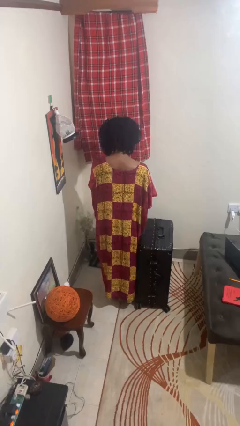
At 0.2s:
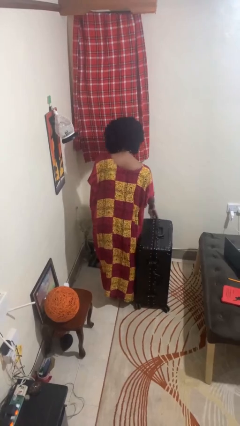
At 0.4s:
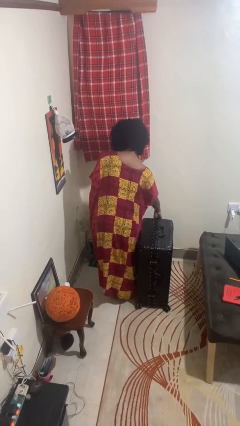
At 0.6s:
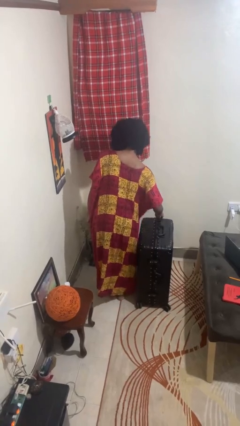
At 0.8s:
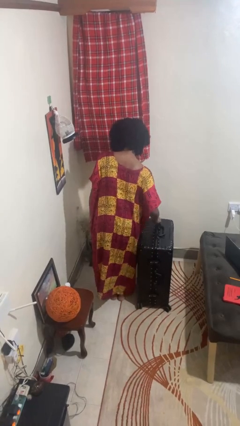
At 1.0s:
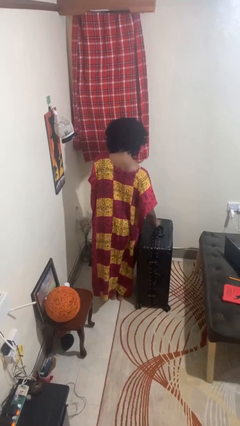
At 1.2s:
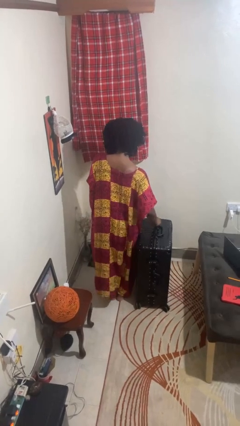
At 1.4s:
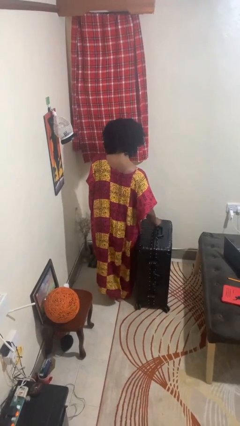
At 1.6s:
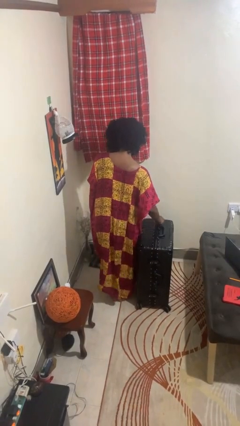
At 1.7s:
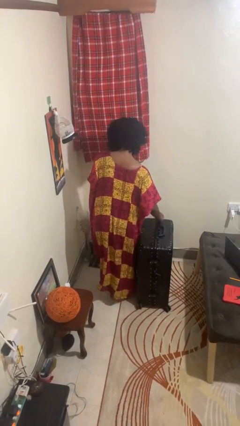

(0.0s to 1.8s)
person opens suitcase

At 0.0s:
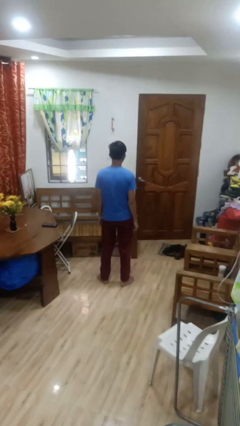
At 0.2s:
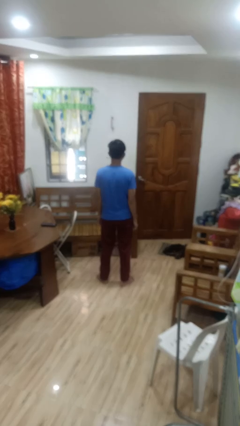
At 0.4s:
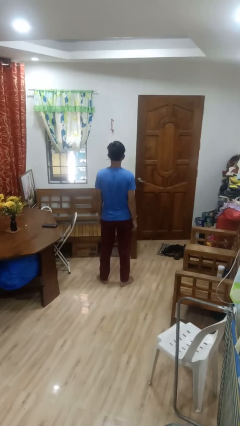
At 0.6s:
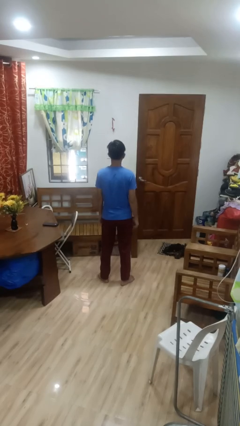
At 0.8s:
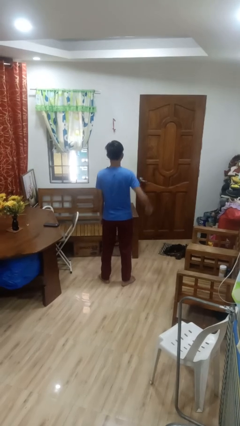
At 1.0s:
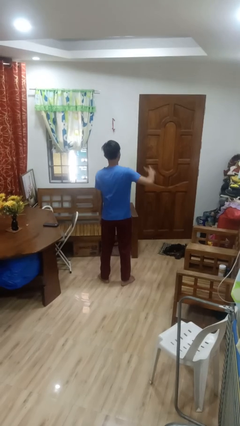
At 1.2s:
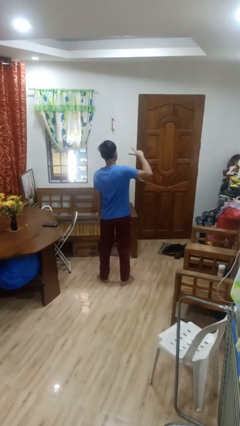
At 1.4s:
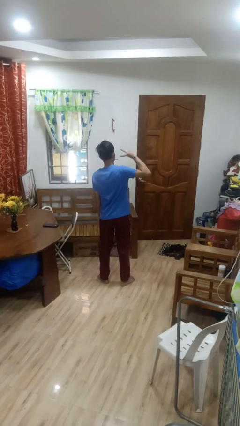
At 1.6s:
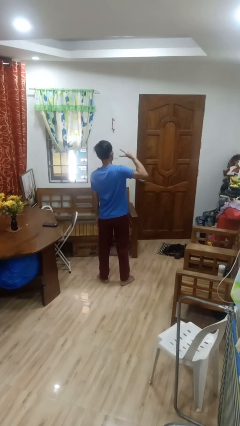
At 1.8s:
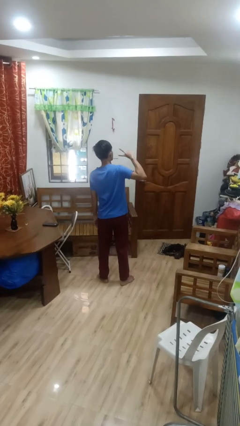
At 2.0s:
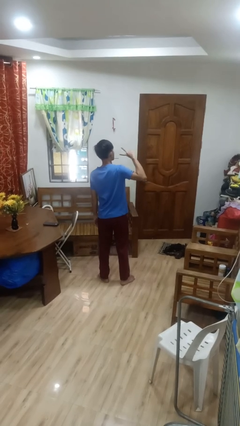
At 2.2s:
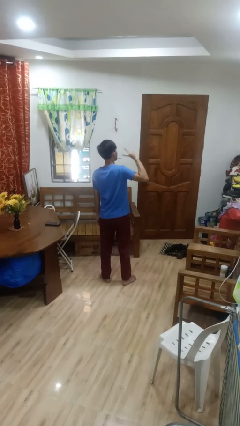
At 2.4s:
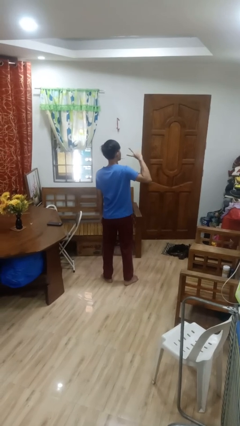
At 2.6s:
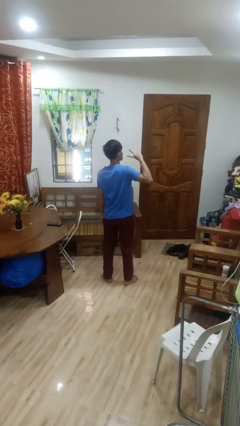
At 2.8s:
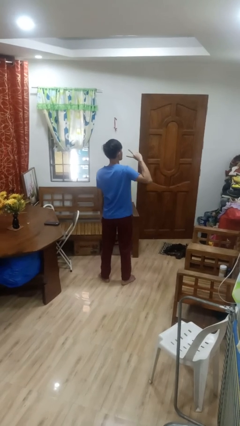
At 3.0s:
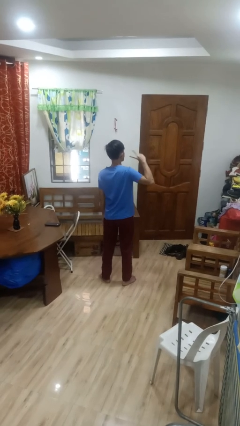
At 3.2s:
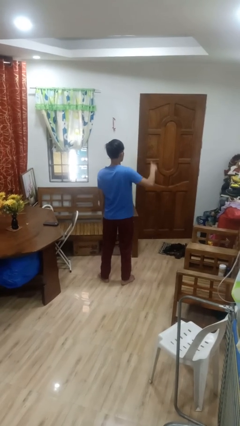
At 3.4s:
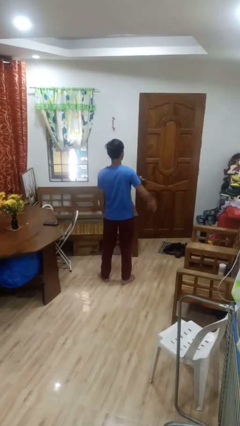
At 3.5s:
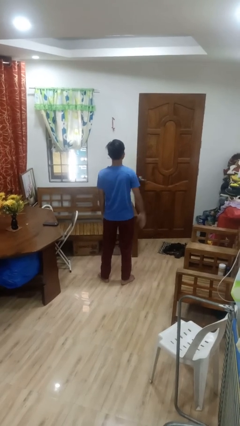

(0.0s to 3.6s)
person gestures peace

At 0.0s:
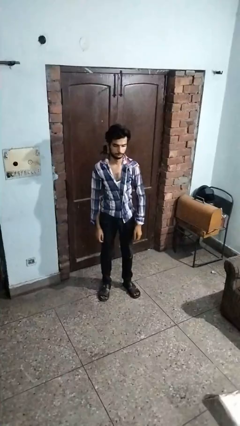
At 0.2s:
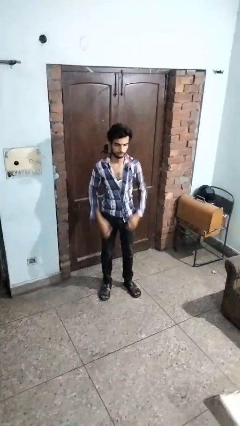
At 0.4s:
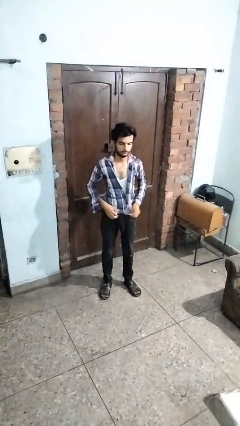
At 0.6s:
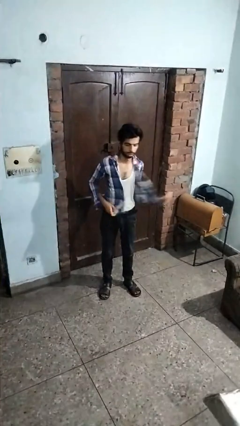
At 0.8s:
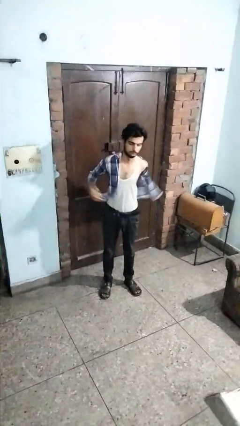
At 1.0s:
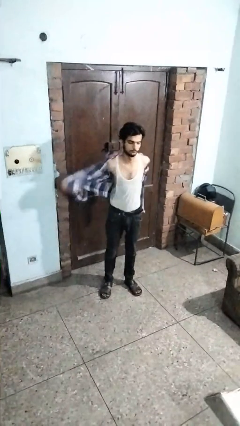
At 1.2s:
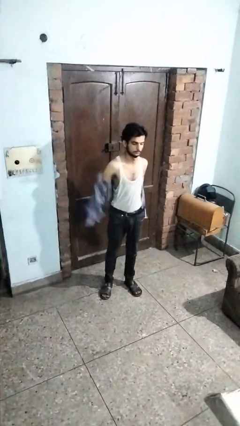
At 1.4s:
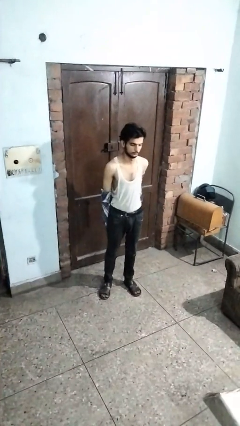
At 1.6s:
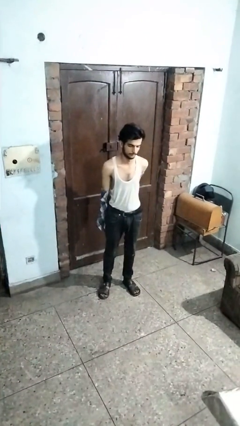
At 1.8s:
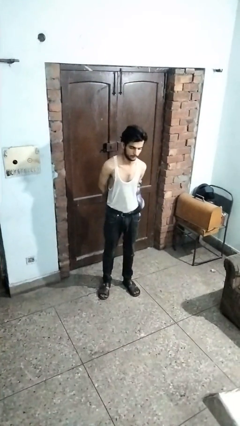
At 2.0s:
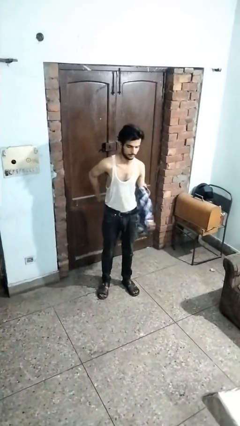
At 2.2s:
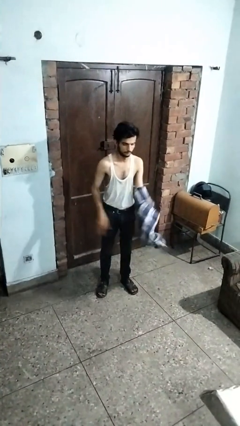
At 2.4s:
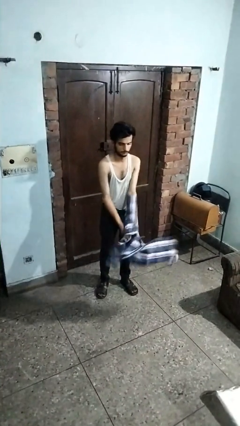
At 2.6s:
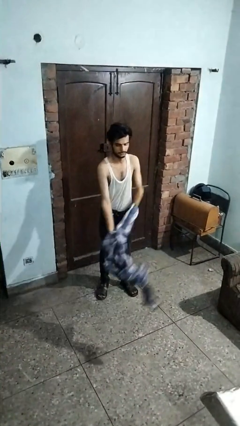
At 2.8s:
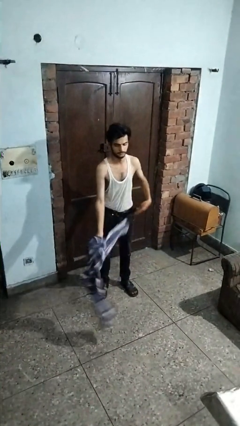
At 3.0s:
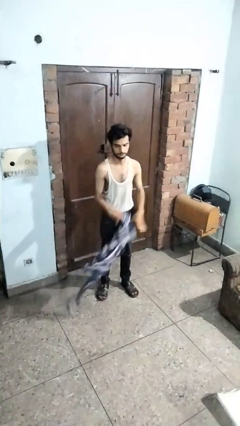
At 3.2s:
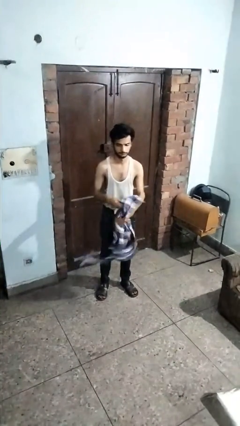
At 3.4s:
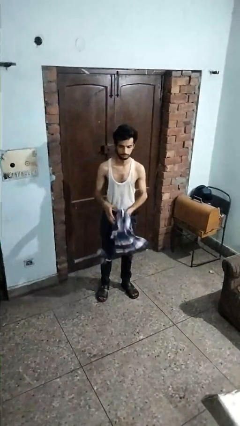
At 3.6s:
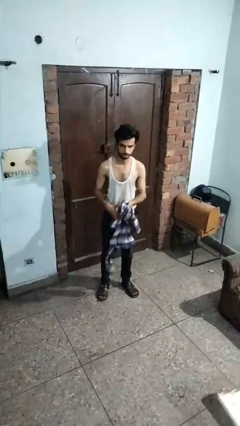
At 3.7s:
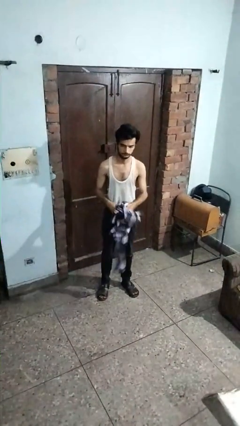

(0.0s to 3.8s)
person takes off shirt

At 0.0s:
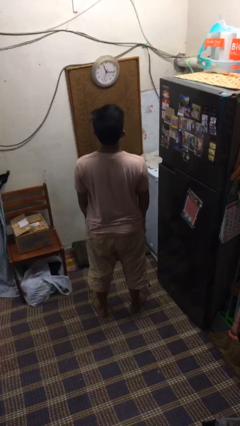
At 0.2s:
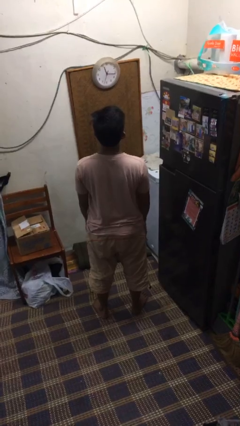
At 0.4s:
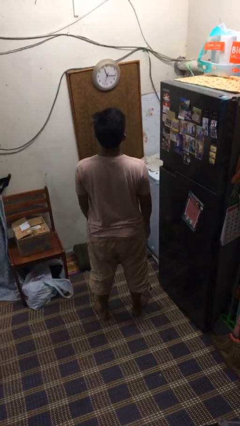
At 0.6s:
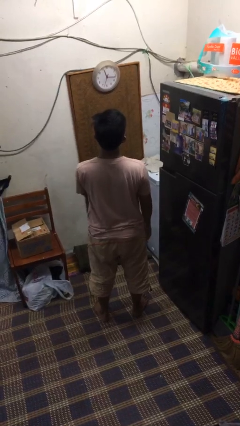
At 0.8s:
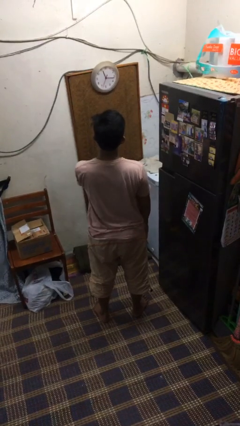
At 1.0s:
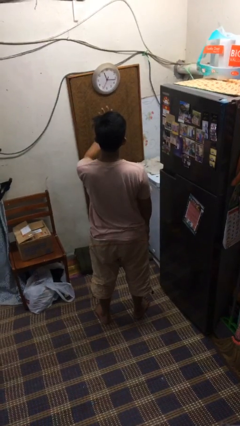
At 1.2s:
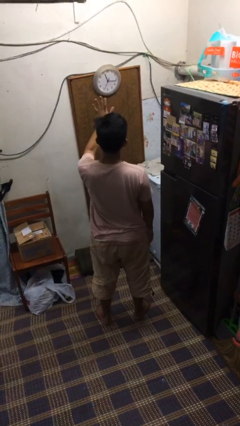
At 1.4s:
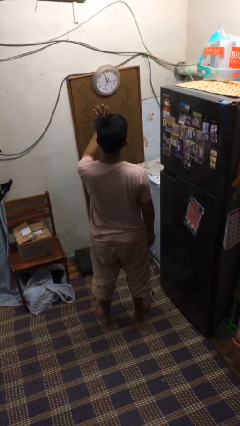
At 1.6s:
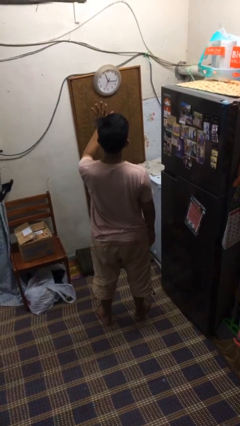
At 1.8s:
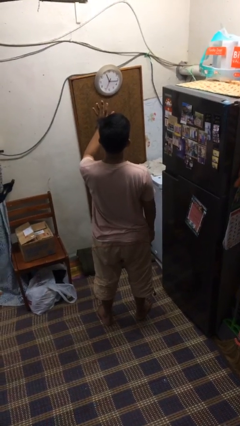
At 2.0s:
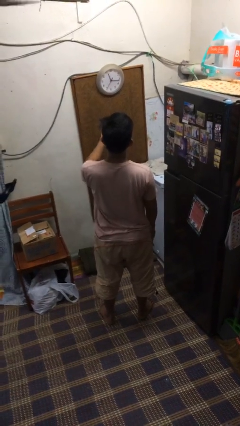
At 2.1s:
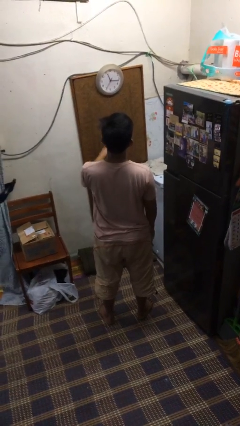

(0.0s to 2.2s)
person gestures stop

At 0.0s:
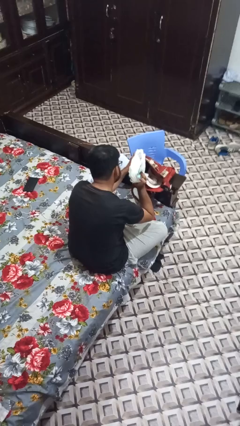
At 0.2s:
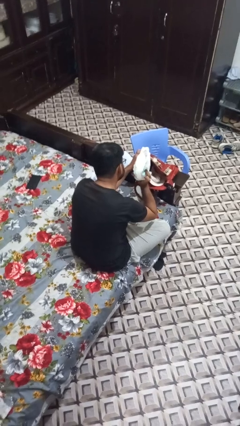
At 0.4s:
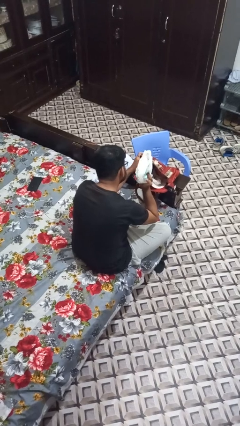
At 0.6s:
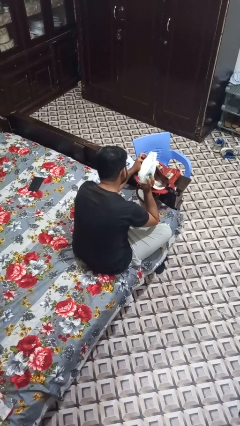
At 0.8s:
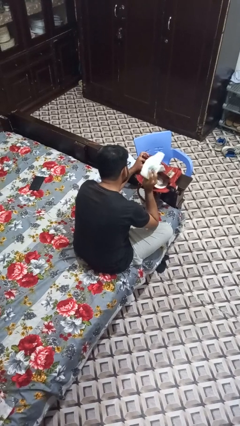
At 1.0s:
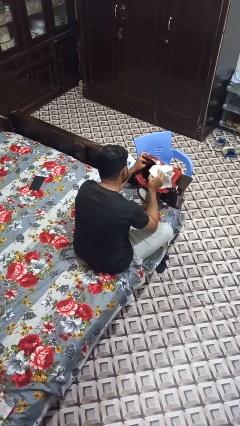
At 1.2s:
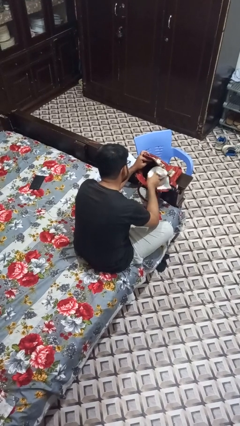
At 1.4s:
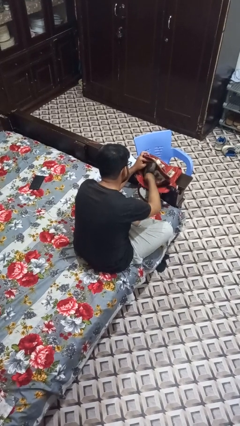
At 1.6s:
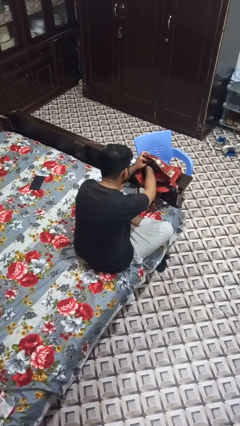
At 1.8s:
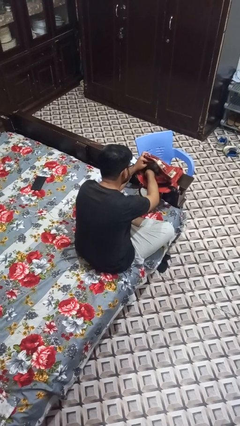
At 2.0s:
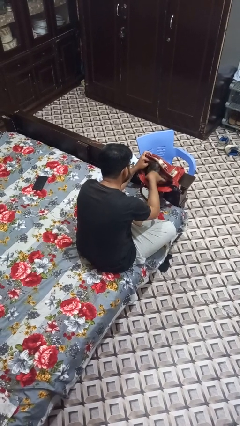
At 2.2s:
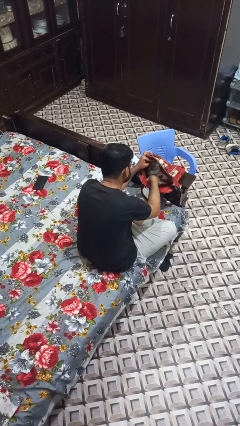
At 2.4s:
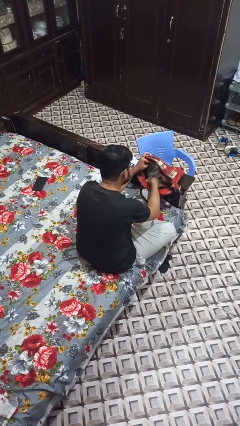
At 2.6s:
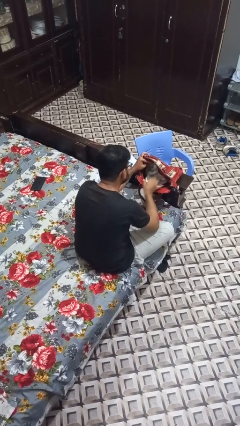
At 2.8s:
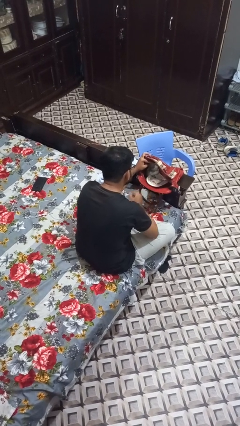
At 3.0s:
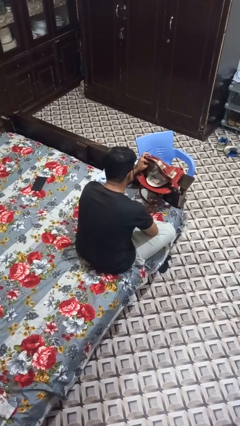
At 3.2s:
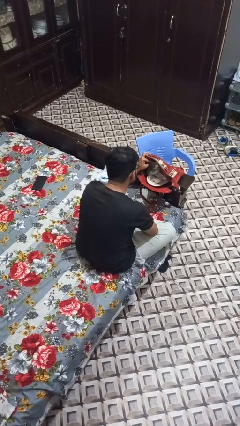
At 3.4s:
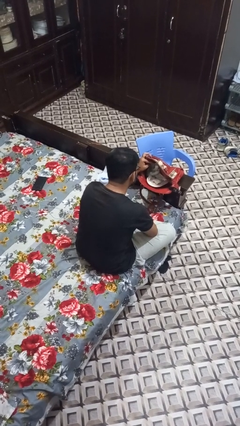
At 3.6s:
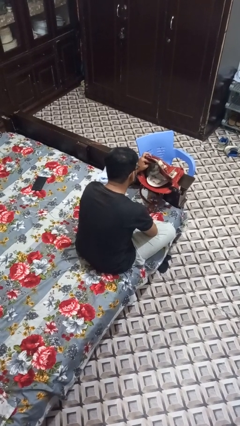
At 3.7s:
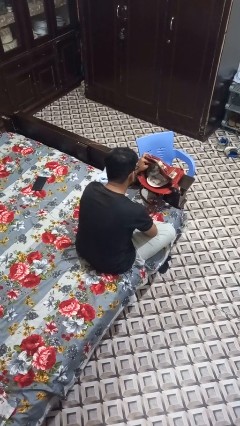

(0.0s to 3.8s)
person puts object into purse

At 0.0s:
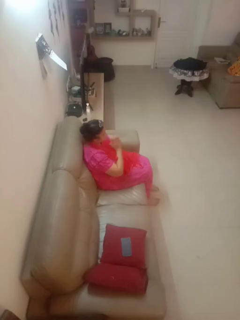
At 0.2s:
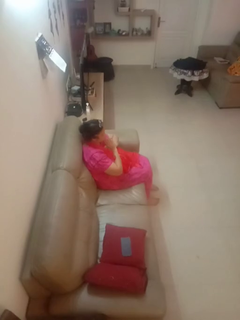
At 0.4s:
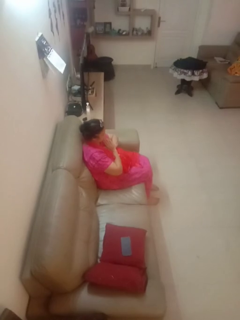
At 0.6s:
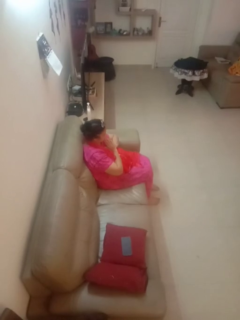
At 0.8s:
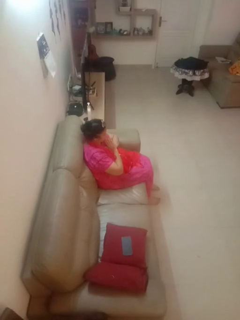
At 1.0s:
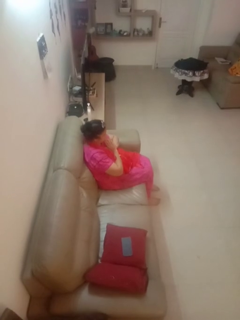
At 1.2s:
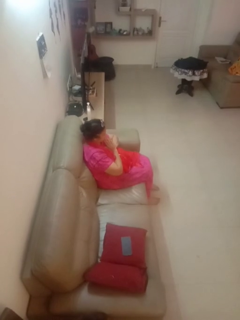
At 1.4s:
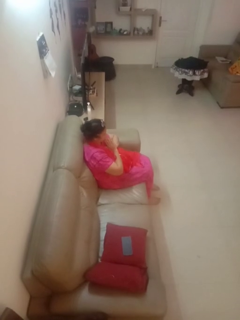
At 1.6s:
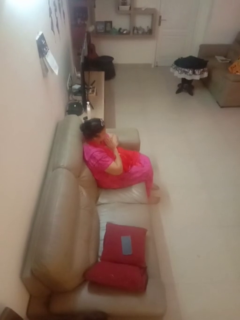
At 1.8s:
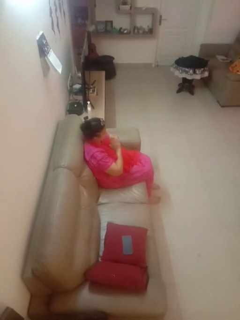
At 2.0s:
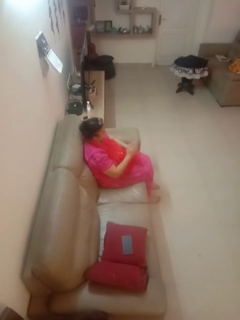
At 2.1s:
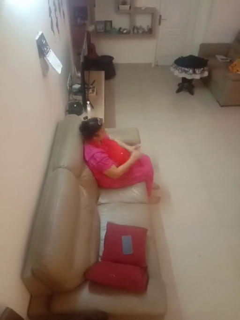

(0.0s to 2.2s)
person prays

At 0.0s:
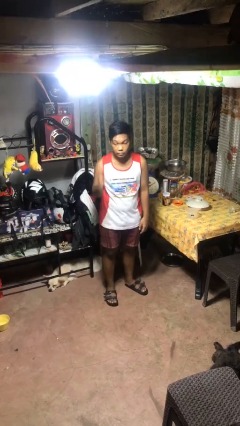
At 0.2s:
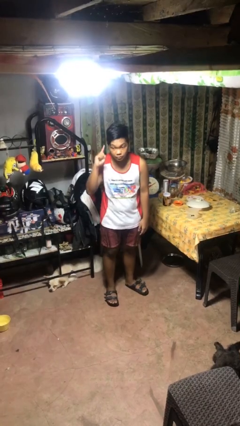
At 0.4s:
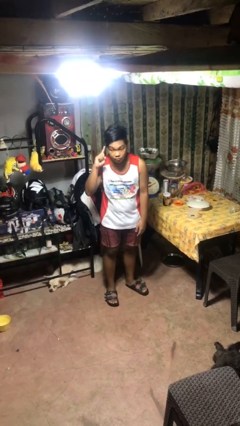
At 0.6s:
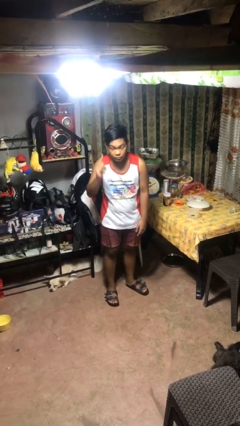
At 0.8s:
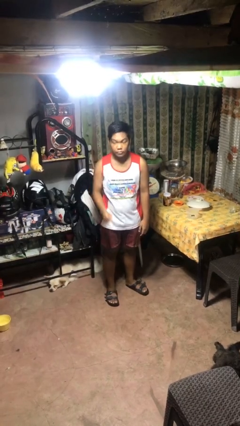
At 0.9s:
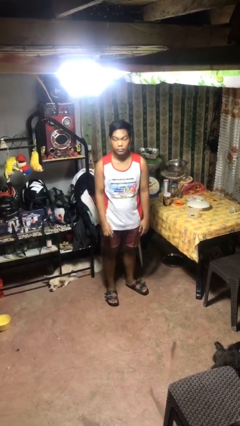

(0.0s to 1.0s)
person gestures listen closely
